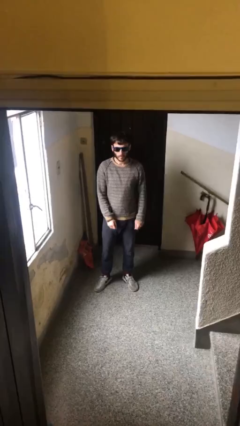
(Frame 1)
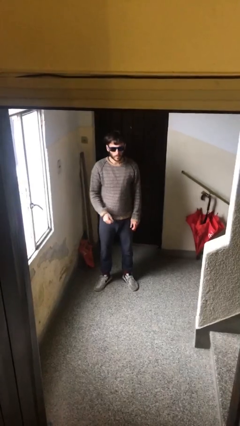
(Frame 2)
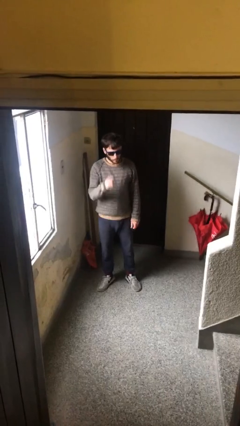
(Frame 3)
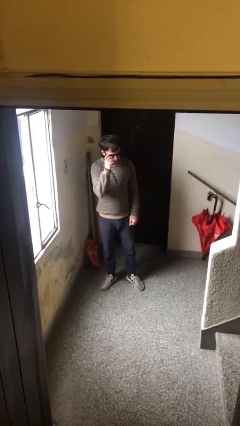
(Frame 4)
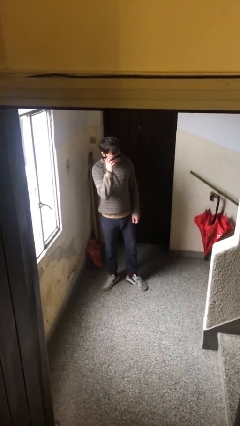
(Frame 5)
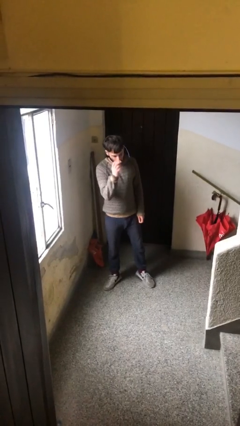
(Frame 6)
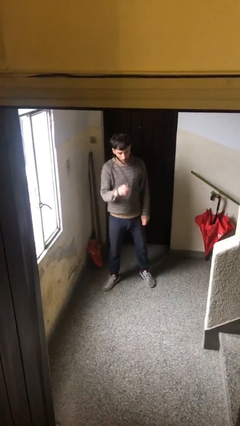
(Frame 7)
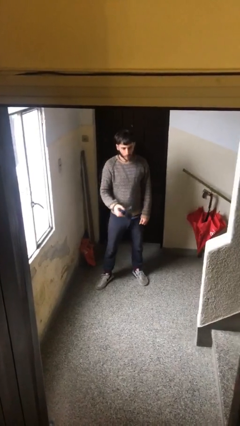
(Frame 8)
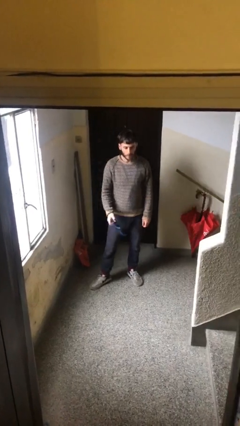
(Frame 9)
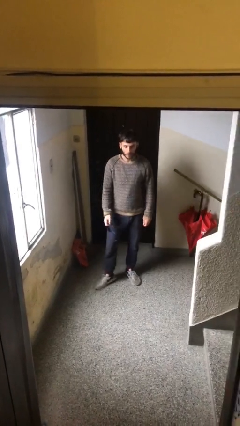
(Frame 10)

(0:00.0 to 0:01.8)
person takes off sunglasses

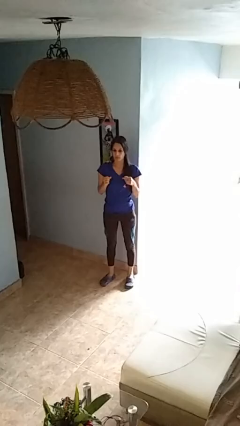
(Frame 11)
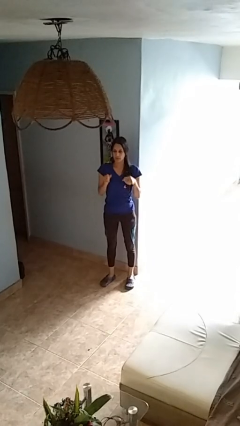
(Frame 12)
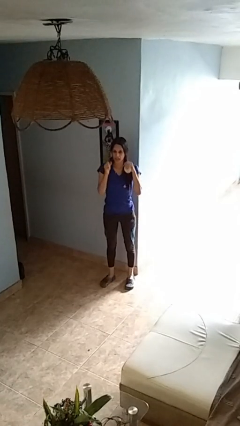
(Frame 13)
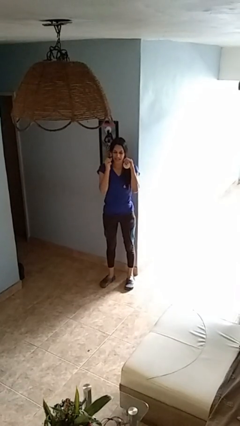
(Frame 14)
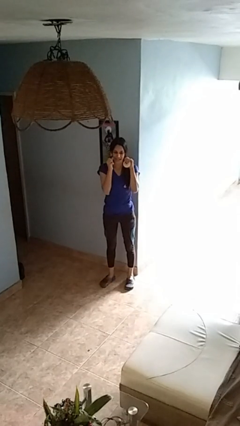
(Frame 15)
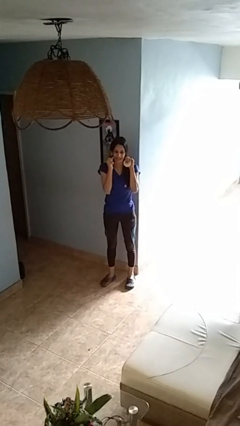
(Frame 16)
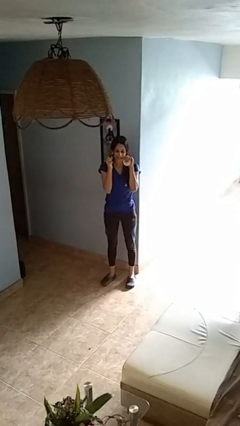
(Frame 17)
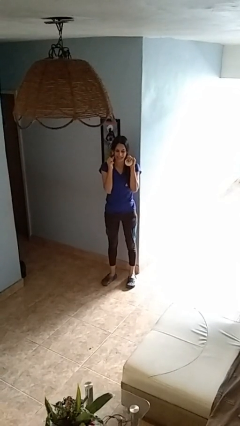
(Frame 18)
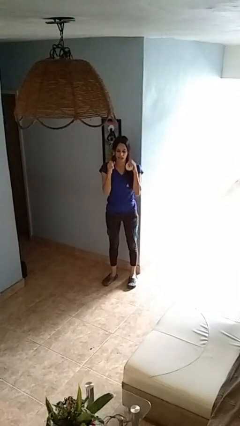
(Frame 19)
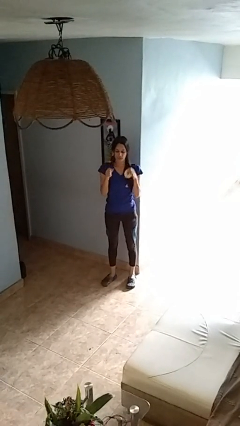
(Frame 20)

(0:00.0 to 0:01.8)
person flosses

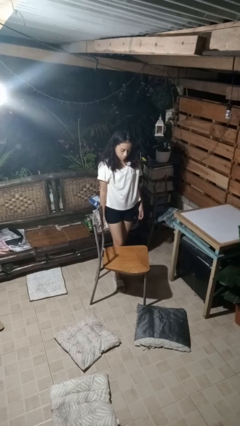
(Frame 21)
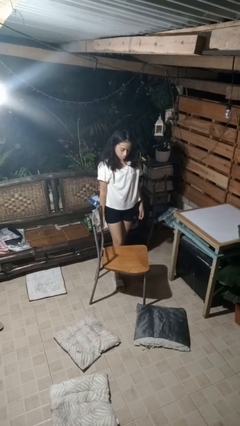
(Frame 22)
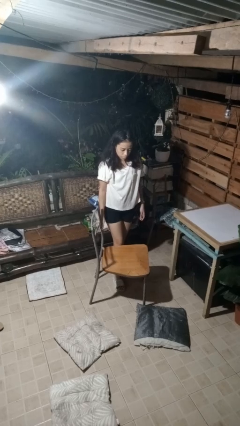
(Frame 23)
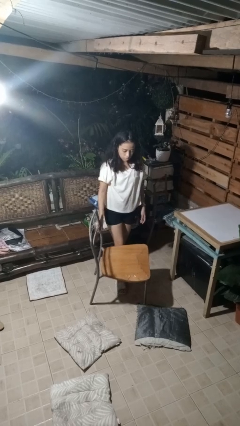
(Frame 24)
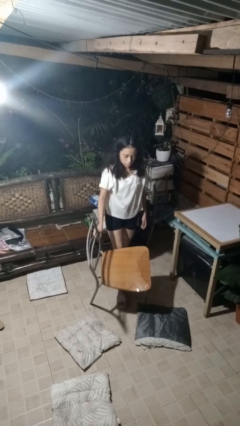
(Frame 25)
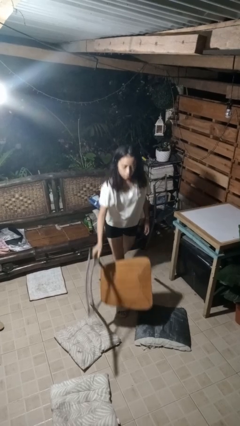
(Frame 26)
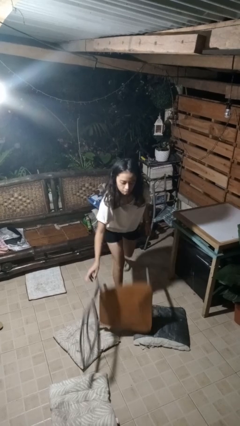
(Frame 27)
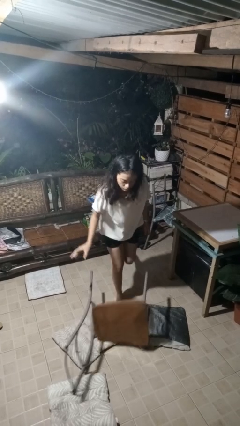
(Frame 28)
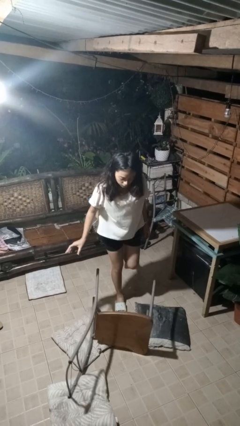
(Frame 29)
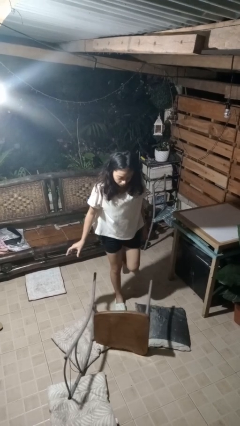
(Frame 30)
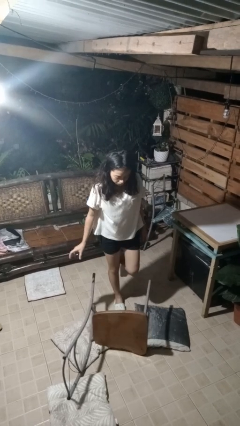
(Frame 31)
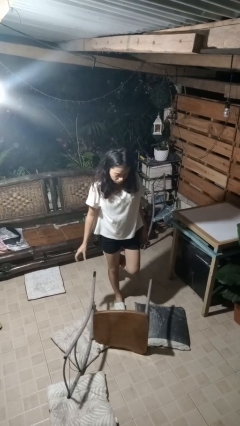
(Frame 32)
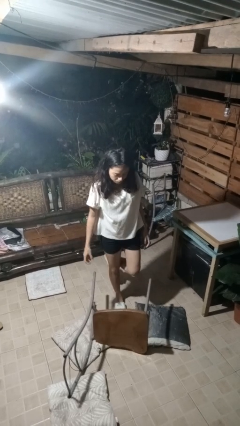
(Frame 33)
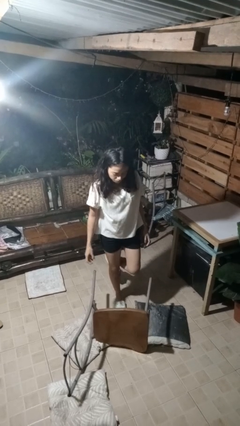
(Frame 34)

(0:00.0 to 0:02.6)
person knocks over furniture

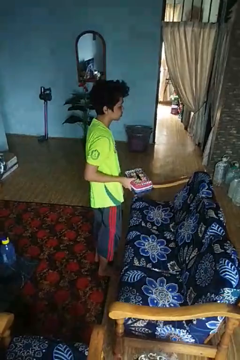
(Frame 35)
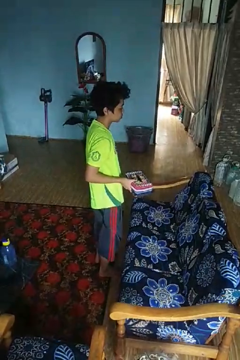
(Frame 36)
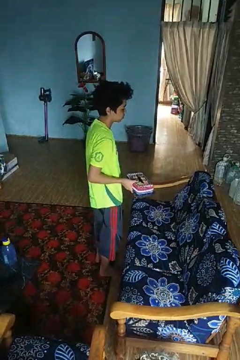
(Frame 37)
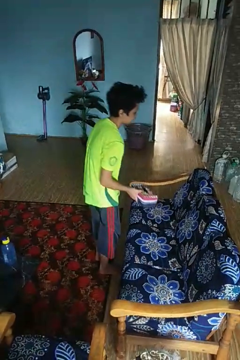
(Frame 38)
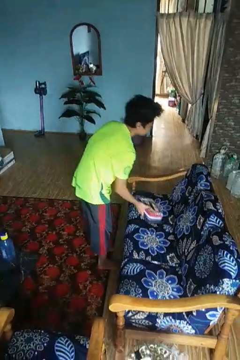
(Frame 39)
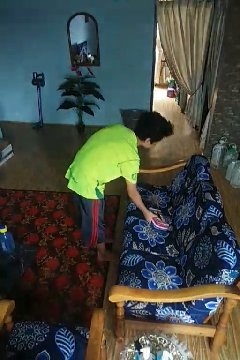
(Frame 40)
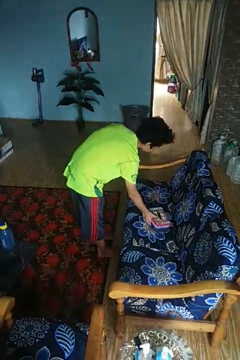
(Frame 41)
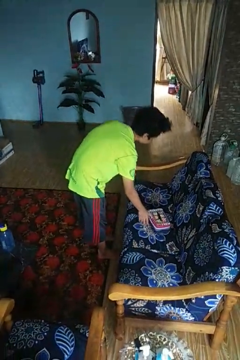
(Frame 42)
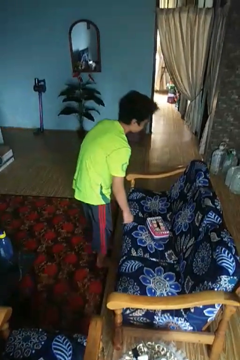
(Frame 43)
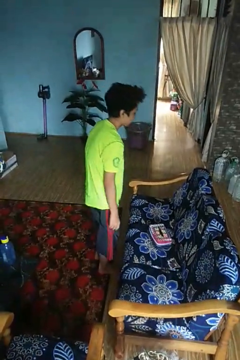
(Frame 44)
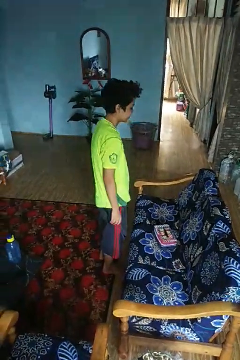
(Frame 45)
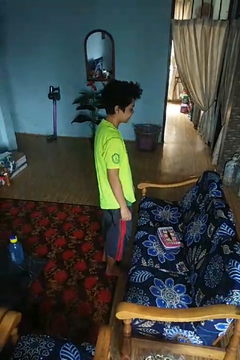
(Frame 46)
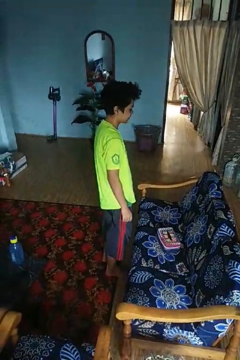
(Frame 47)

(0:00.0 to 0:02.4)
person puts down object on couch

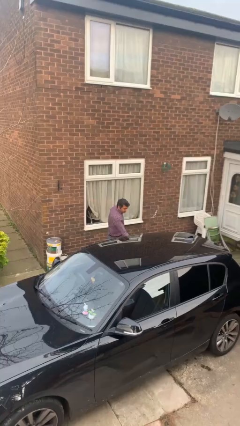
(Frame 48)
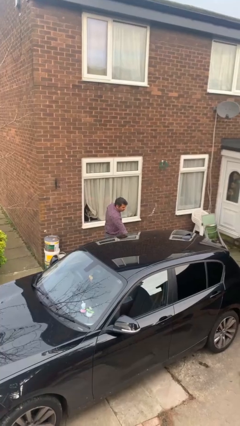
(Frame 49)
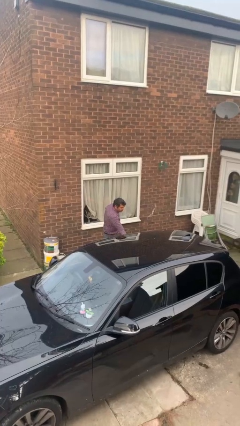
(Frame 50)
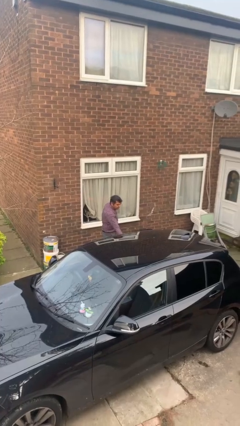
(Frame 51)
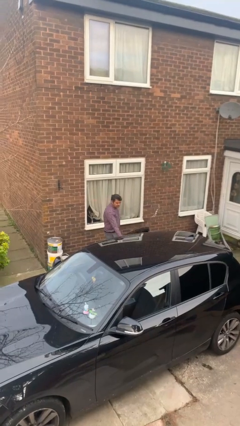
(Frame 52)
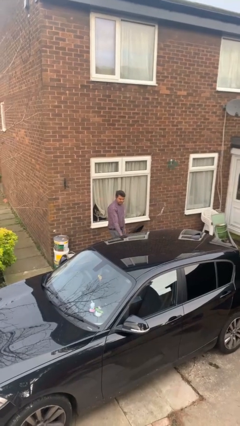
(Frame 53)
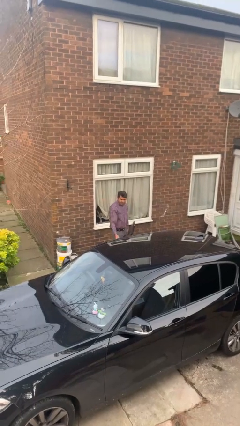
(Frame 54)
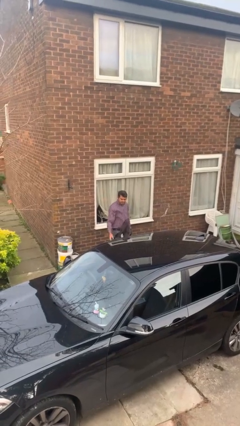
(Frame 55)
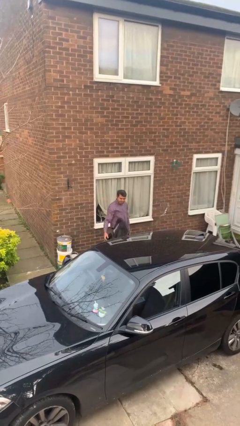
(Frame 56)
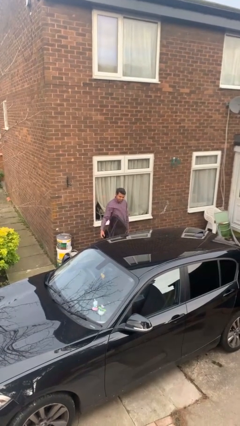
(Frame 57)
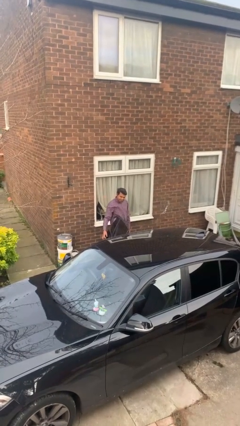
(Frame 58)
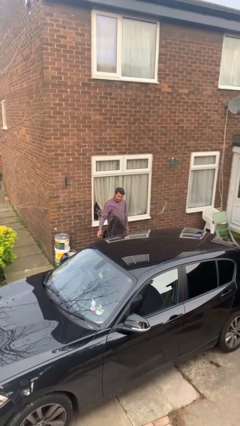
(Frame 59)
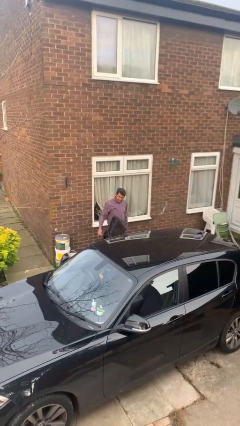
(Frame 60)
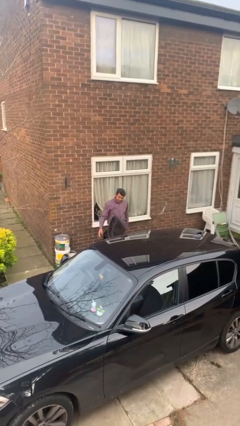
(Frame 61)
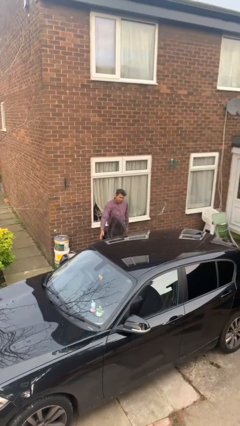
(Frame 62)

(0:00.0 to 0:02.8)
person opens car door

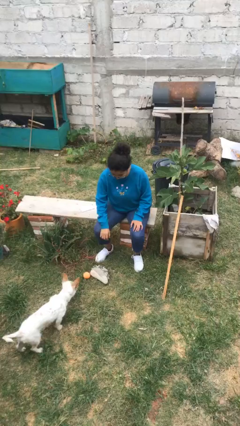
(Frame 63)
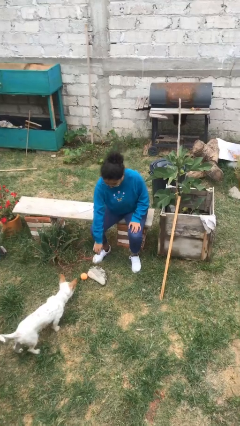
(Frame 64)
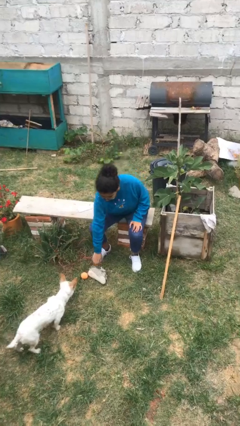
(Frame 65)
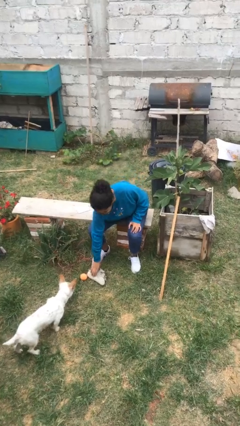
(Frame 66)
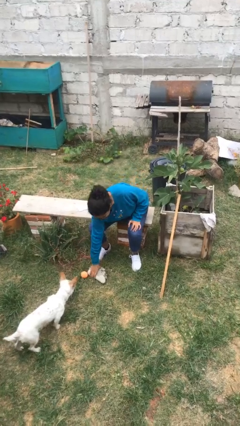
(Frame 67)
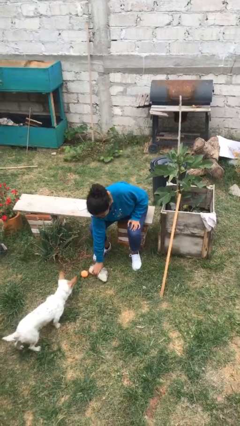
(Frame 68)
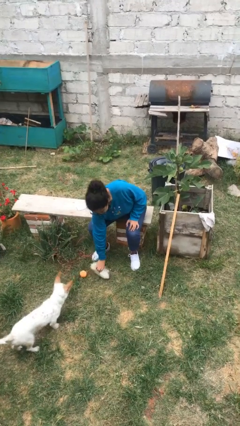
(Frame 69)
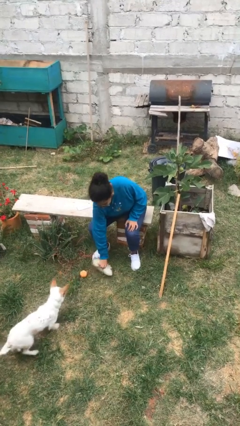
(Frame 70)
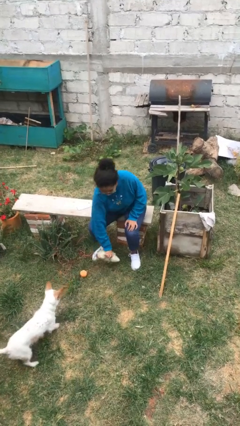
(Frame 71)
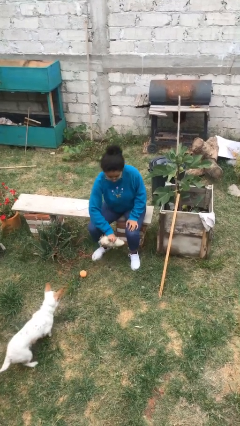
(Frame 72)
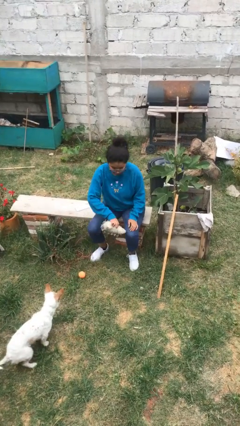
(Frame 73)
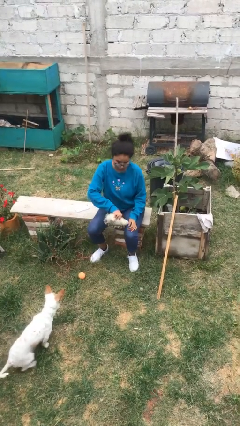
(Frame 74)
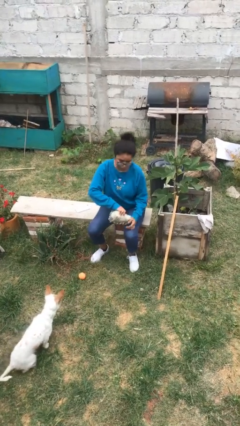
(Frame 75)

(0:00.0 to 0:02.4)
person picks up object from floor

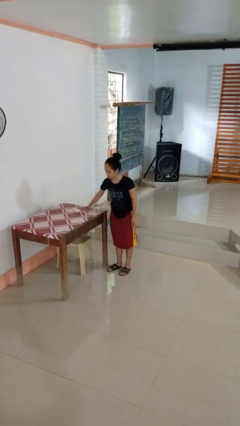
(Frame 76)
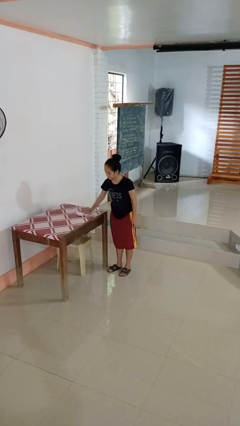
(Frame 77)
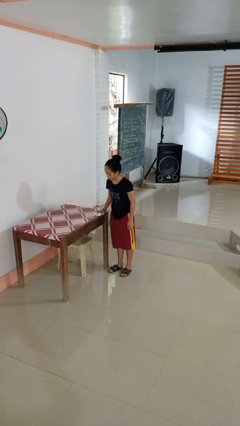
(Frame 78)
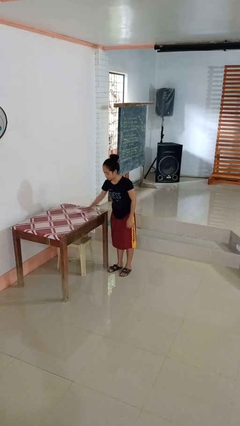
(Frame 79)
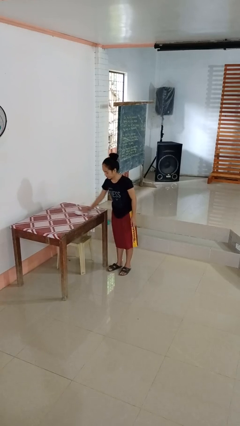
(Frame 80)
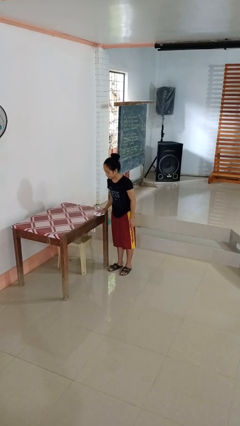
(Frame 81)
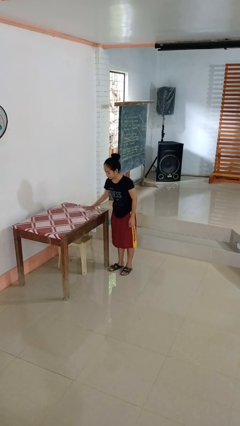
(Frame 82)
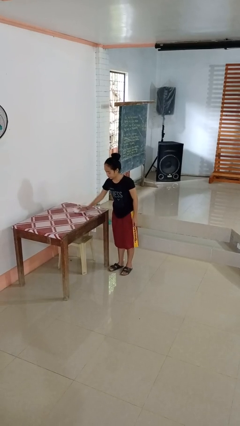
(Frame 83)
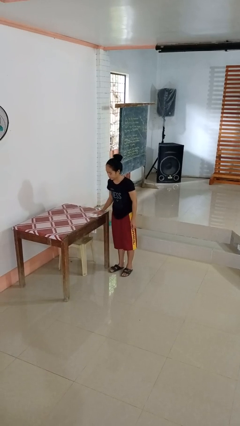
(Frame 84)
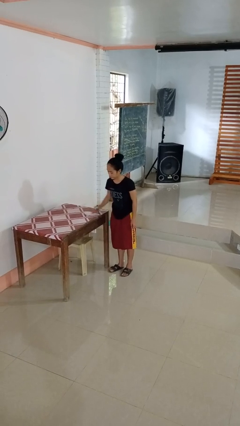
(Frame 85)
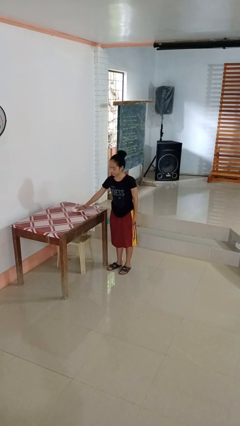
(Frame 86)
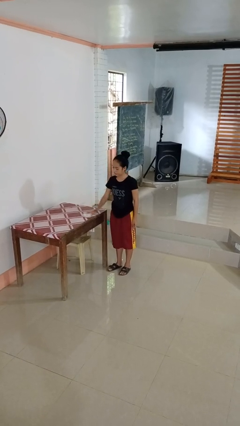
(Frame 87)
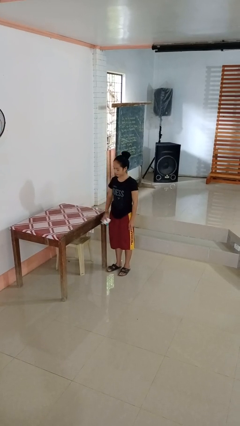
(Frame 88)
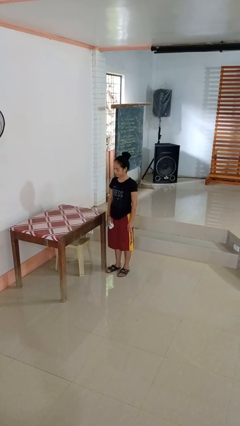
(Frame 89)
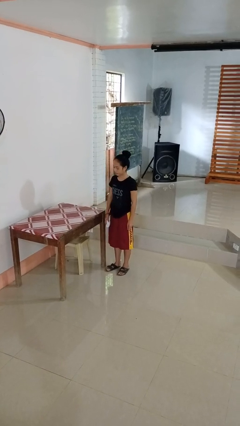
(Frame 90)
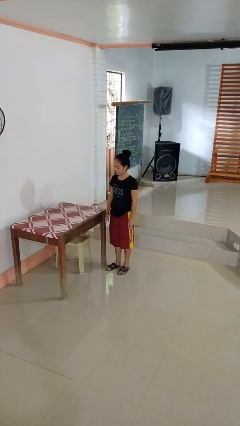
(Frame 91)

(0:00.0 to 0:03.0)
person cleans table with rag

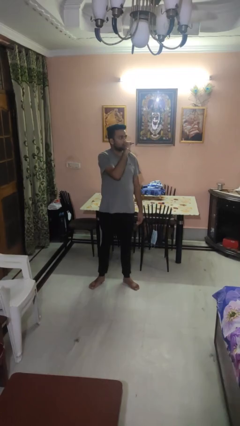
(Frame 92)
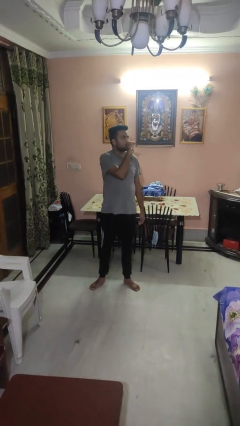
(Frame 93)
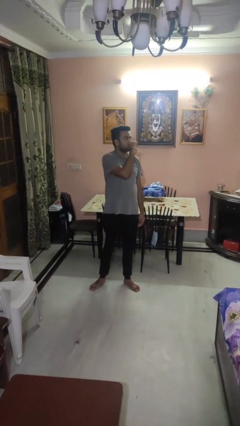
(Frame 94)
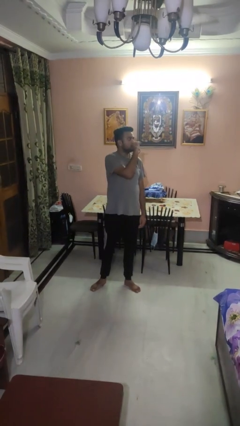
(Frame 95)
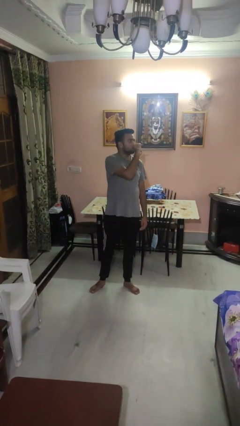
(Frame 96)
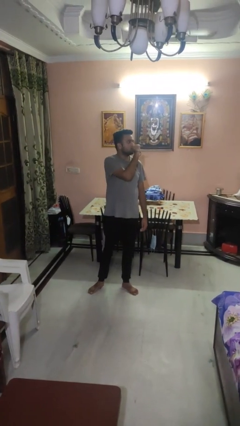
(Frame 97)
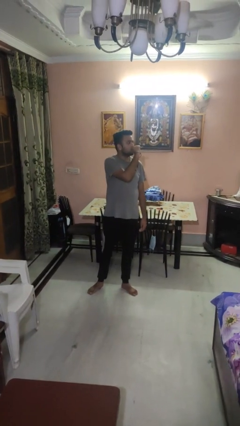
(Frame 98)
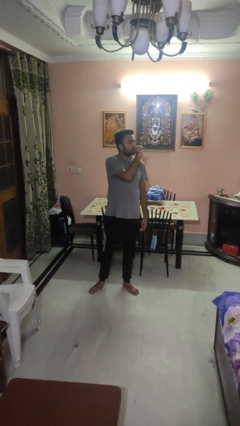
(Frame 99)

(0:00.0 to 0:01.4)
person vapes
